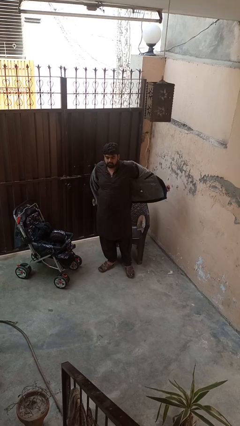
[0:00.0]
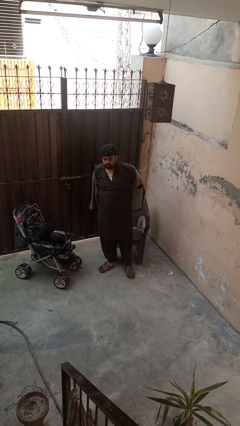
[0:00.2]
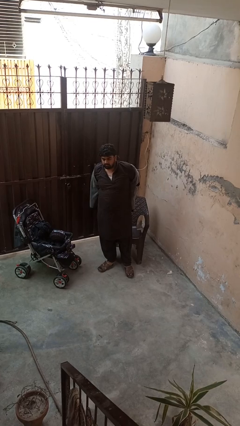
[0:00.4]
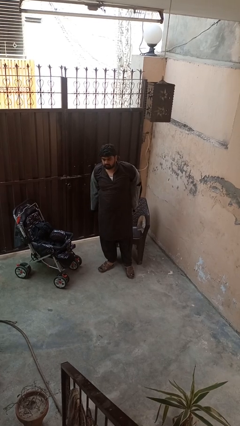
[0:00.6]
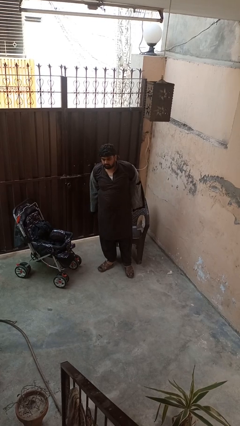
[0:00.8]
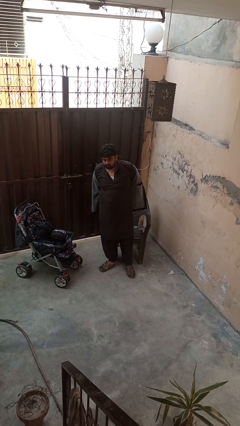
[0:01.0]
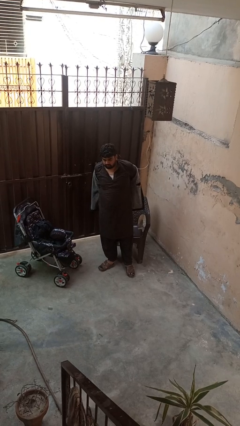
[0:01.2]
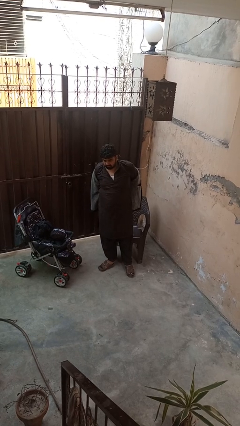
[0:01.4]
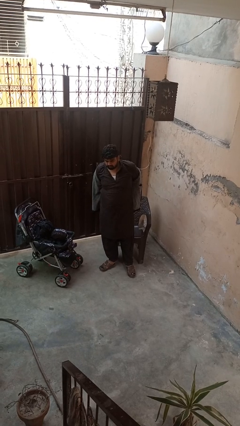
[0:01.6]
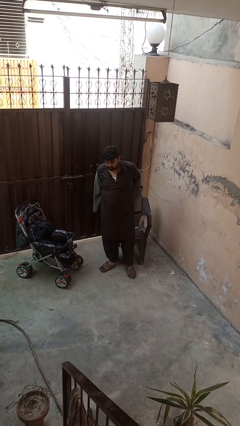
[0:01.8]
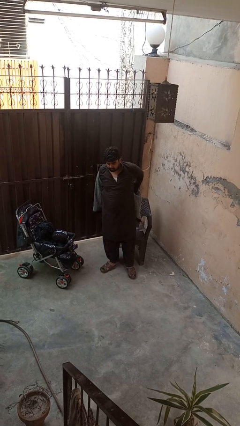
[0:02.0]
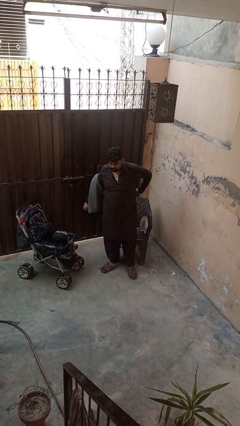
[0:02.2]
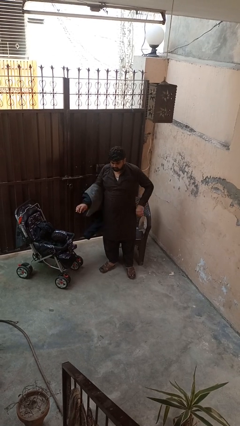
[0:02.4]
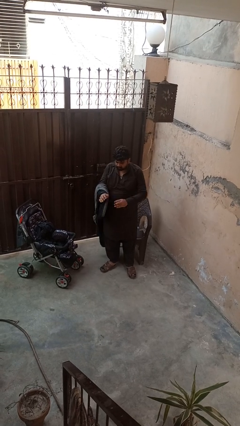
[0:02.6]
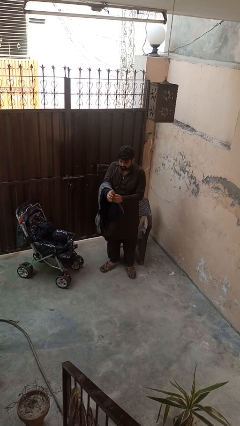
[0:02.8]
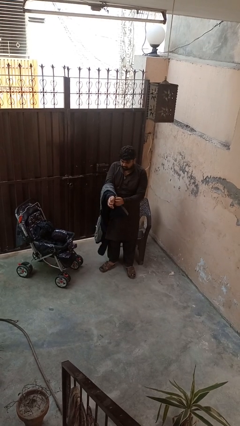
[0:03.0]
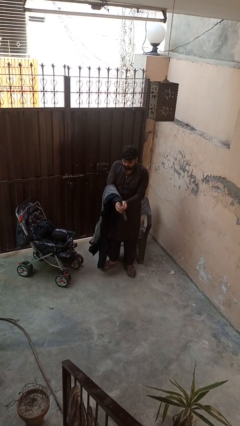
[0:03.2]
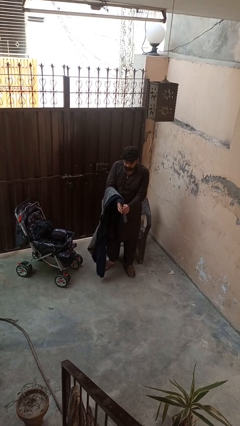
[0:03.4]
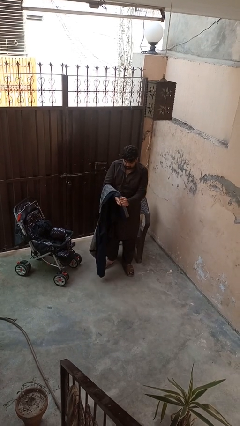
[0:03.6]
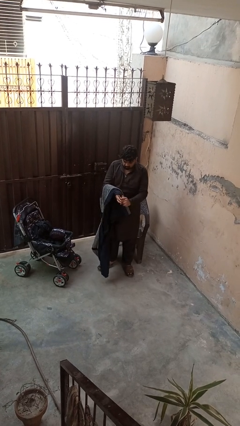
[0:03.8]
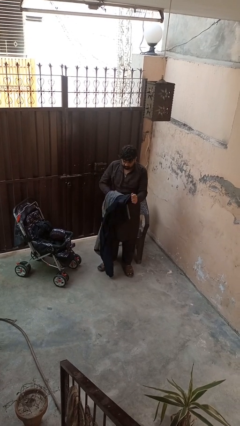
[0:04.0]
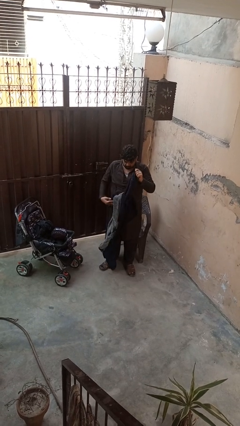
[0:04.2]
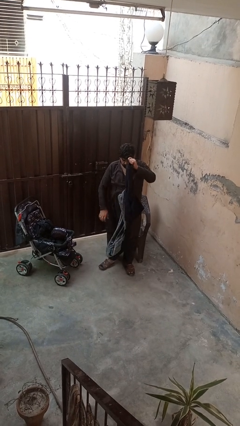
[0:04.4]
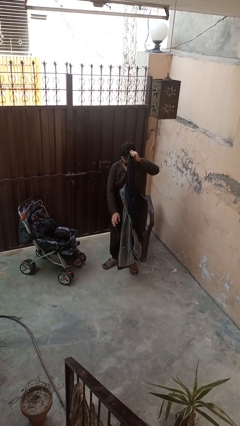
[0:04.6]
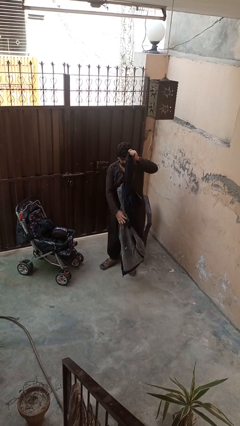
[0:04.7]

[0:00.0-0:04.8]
person takes off jacket

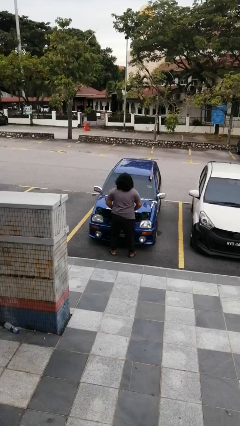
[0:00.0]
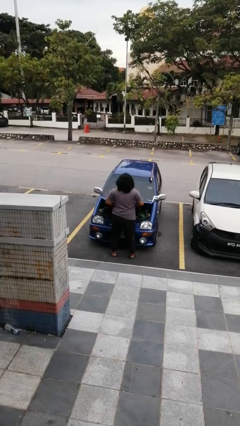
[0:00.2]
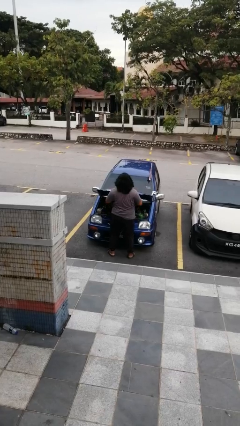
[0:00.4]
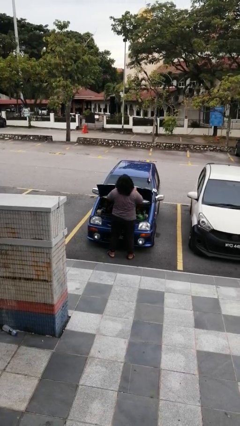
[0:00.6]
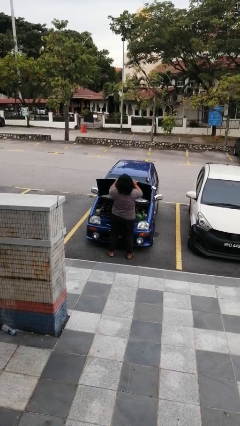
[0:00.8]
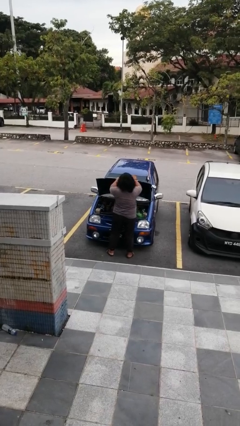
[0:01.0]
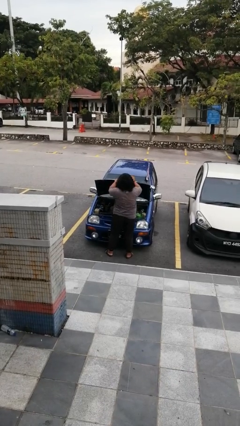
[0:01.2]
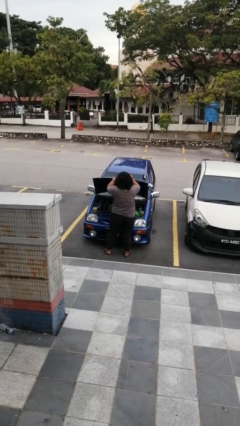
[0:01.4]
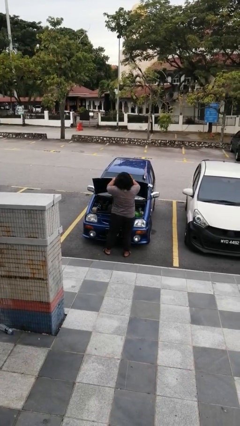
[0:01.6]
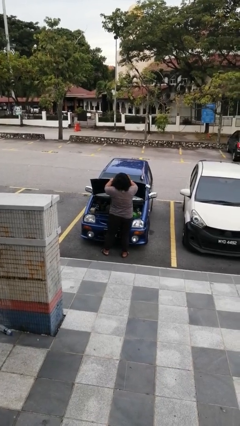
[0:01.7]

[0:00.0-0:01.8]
person opens car hood

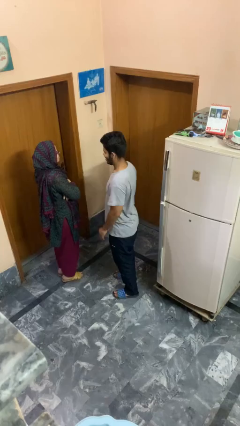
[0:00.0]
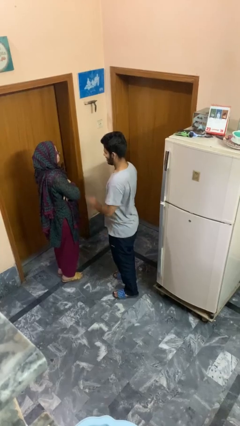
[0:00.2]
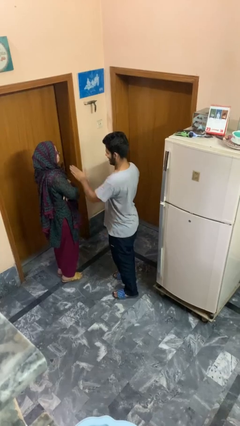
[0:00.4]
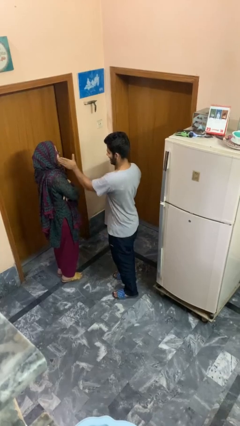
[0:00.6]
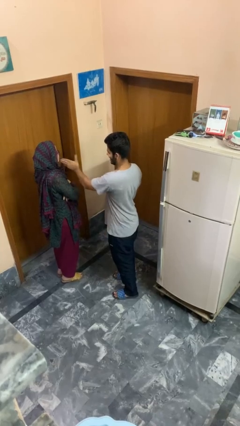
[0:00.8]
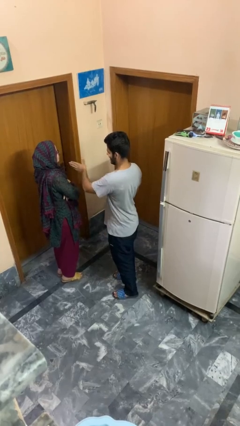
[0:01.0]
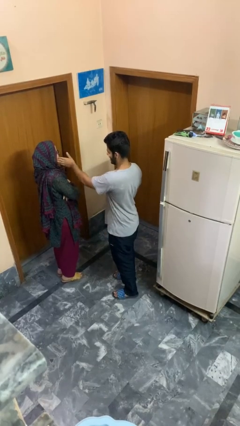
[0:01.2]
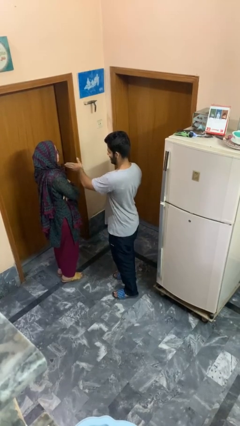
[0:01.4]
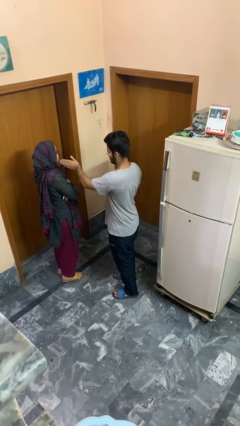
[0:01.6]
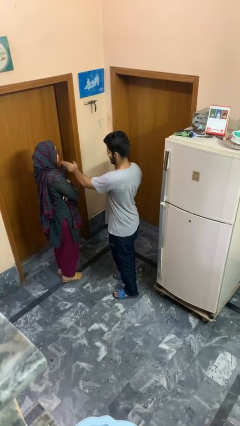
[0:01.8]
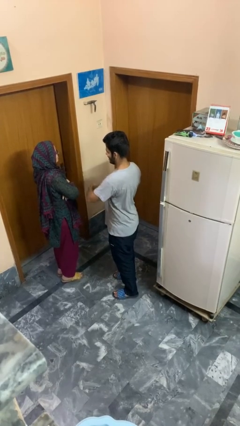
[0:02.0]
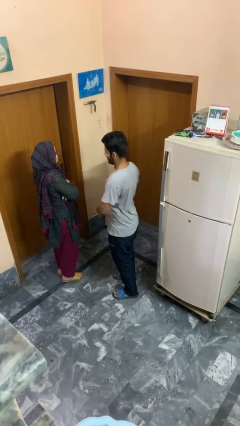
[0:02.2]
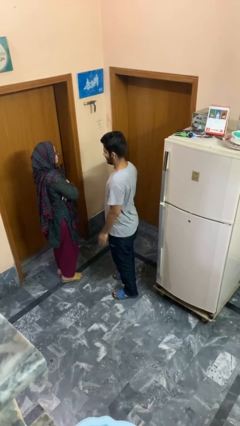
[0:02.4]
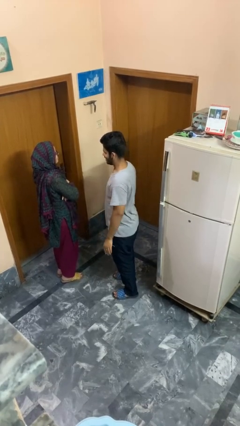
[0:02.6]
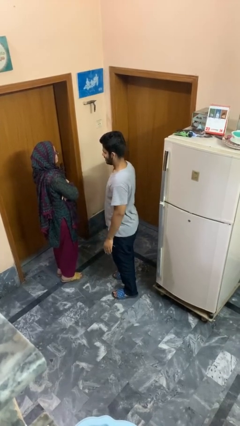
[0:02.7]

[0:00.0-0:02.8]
person touches face of person

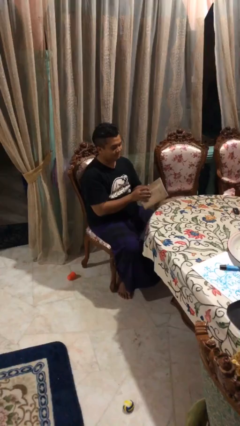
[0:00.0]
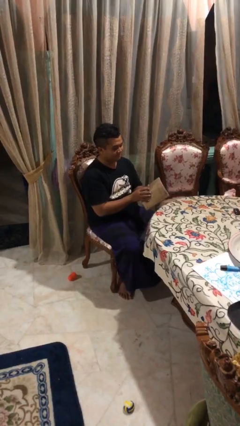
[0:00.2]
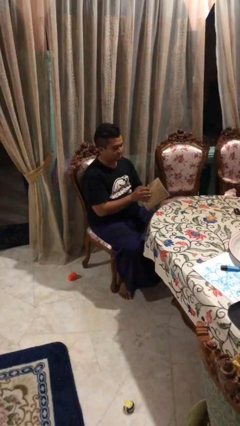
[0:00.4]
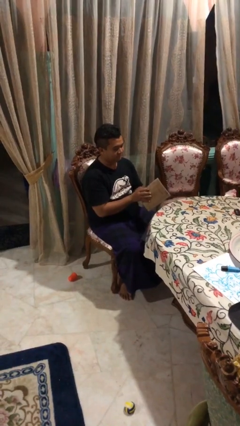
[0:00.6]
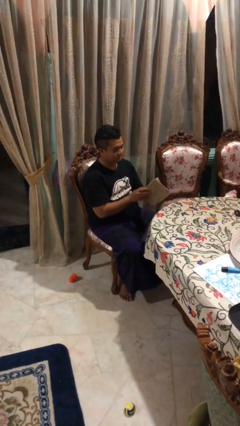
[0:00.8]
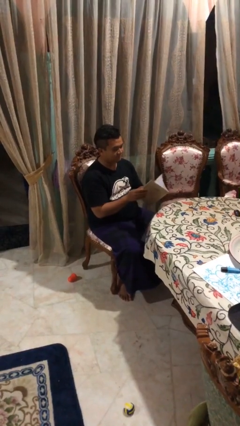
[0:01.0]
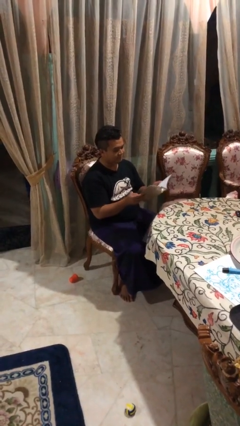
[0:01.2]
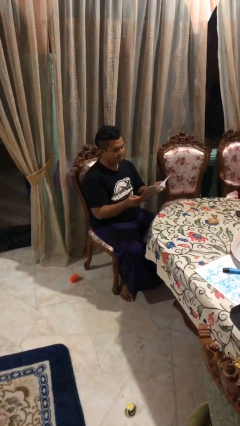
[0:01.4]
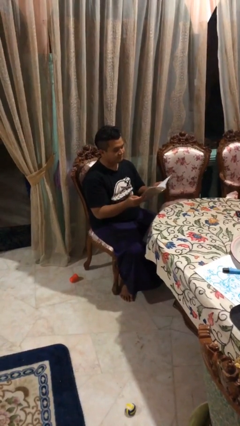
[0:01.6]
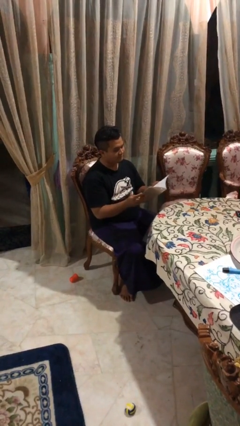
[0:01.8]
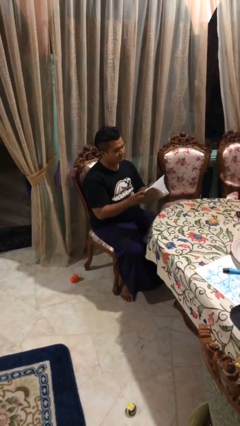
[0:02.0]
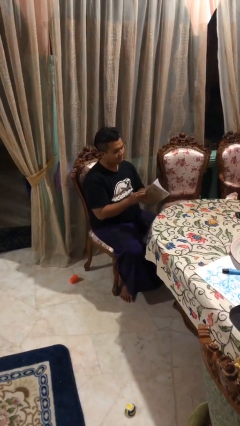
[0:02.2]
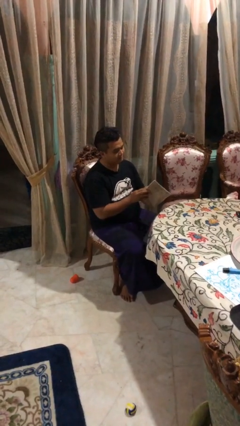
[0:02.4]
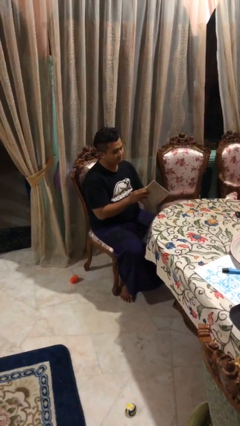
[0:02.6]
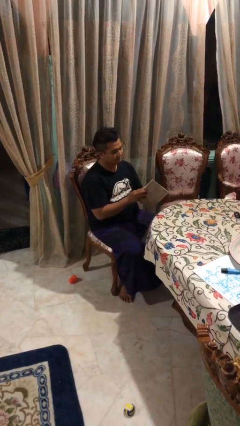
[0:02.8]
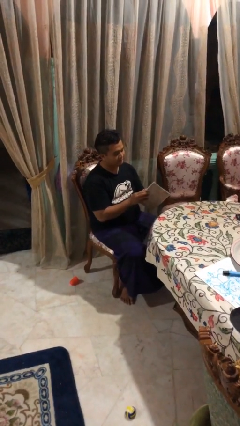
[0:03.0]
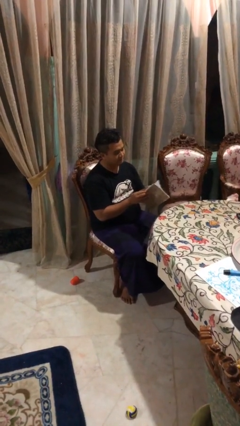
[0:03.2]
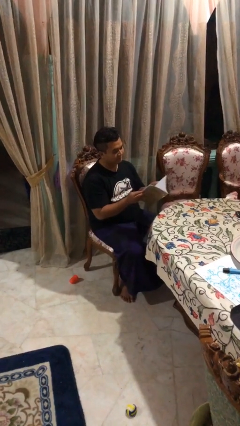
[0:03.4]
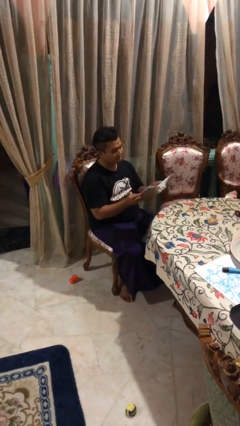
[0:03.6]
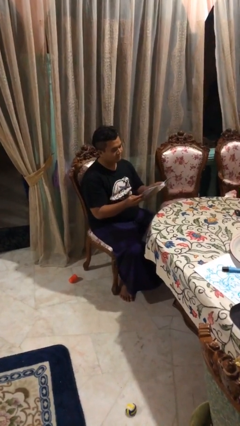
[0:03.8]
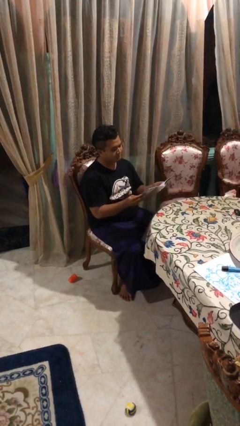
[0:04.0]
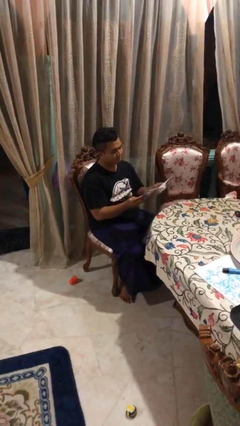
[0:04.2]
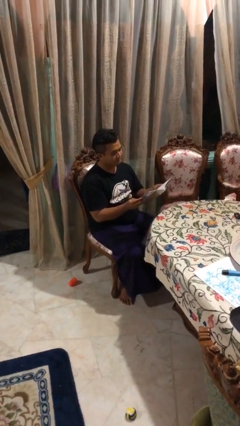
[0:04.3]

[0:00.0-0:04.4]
person reads document

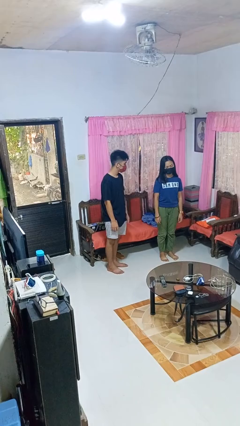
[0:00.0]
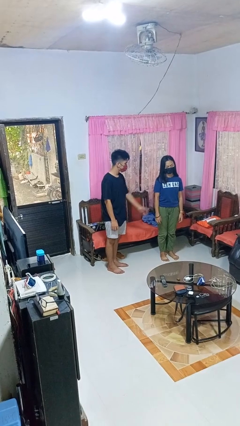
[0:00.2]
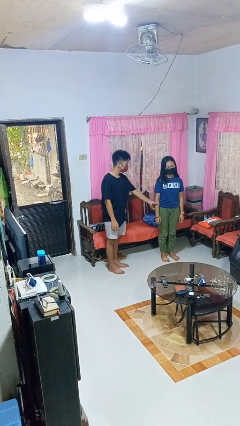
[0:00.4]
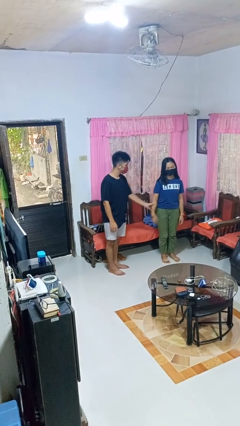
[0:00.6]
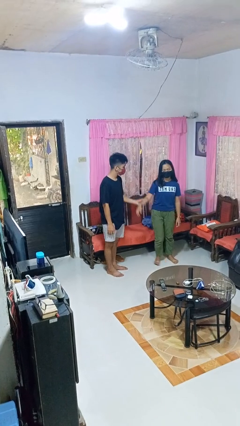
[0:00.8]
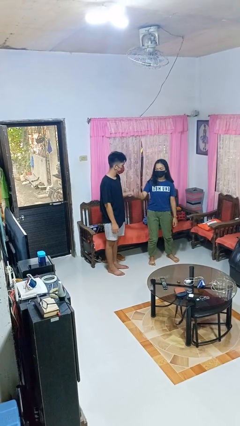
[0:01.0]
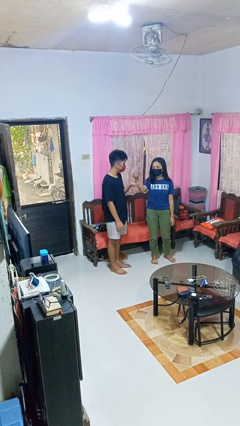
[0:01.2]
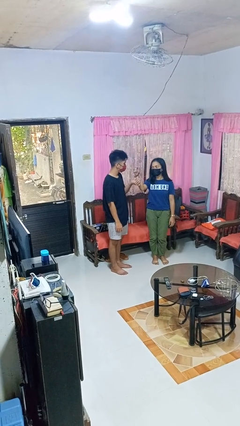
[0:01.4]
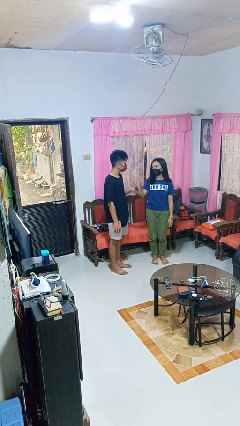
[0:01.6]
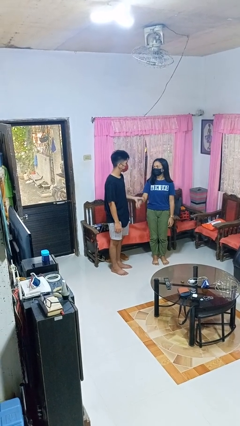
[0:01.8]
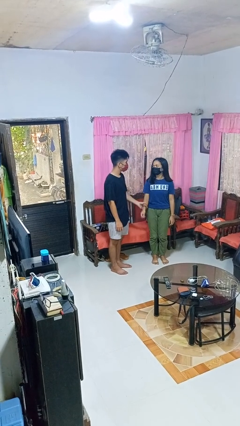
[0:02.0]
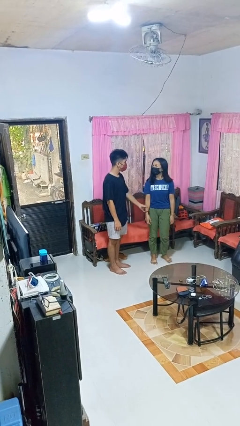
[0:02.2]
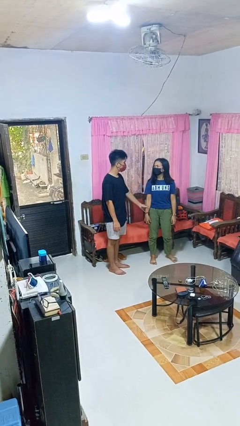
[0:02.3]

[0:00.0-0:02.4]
person grabs person by forearm

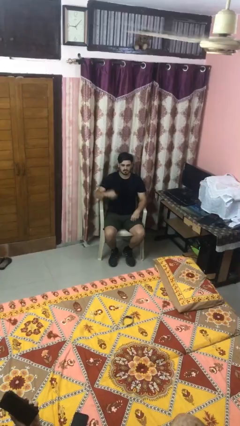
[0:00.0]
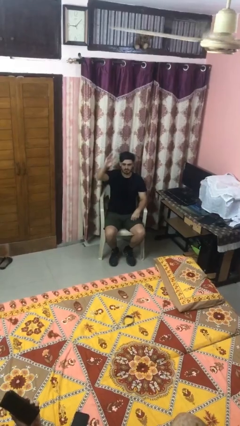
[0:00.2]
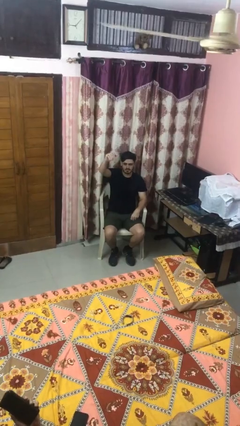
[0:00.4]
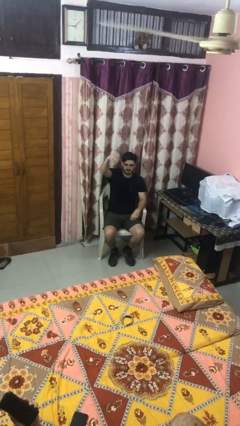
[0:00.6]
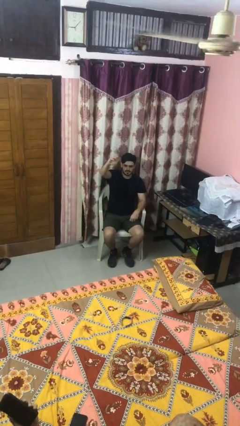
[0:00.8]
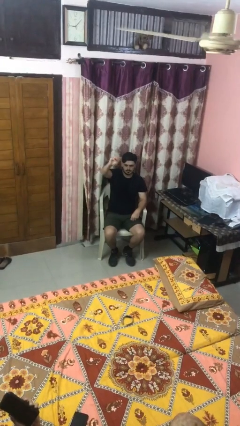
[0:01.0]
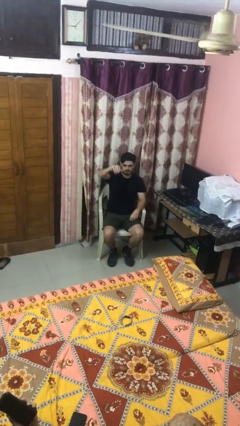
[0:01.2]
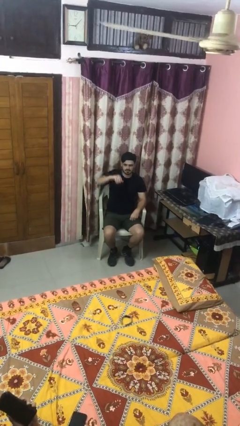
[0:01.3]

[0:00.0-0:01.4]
person gestures come here
